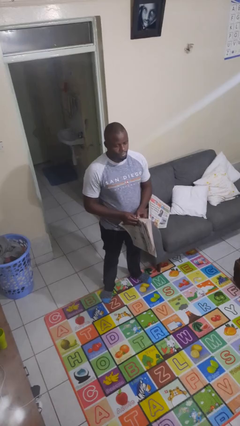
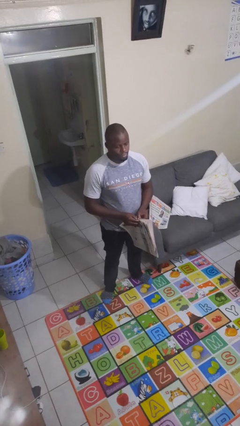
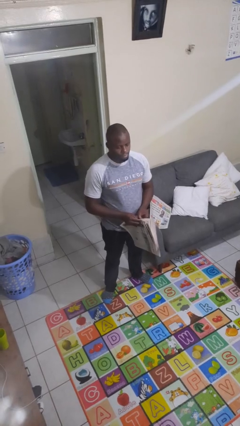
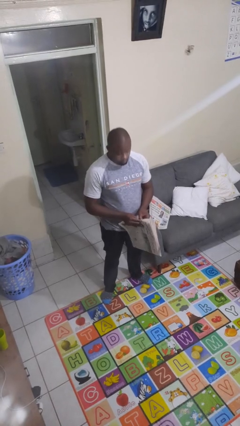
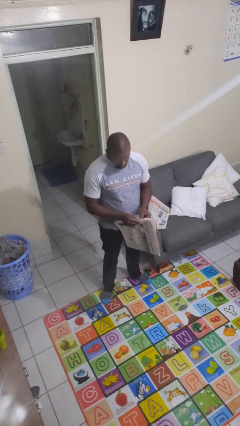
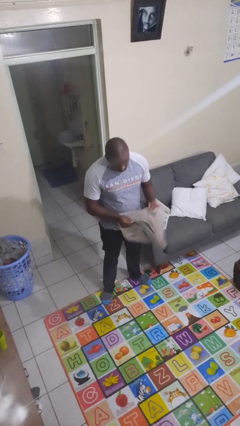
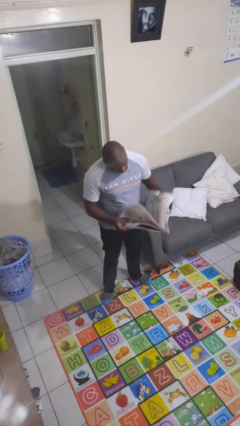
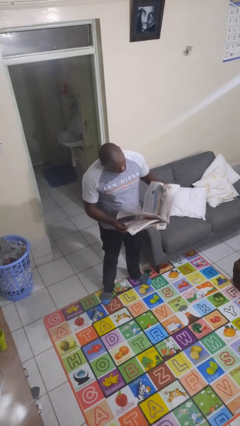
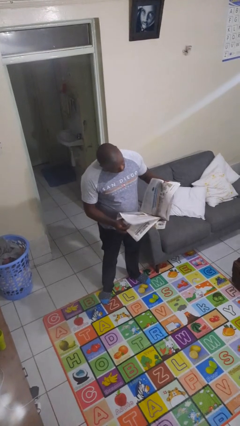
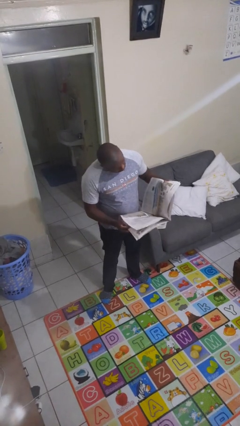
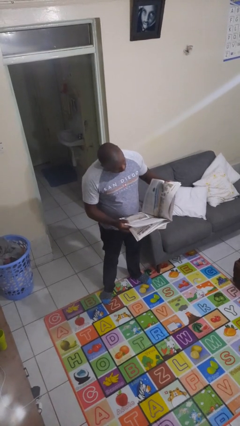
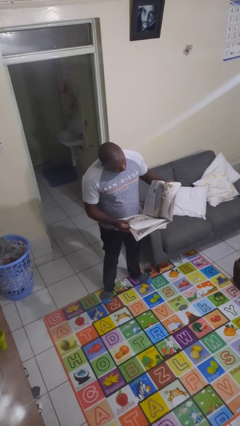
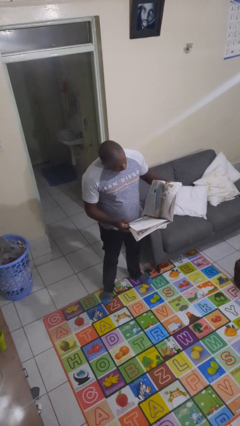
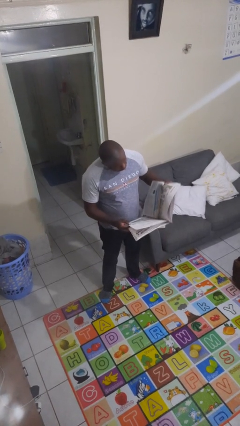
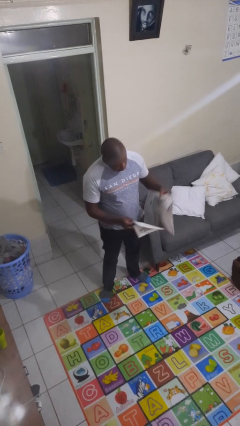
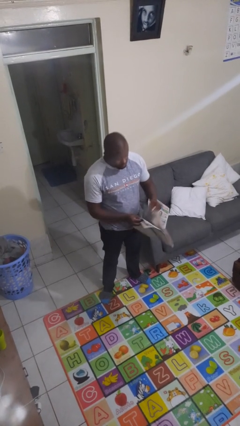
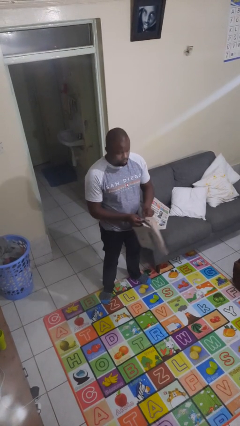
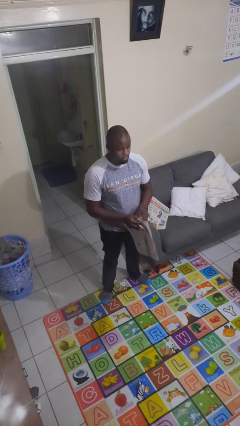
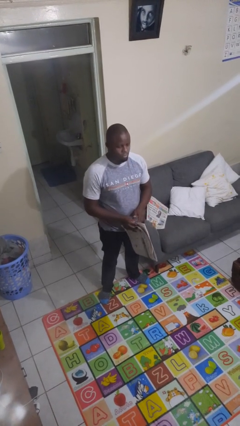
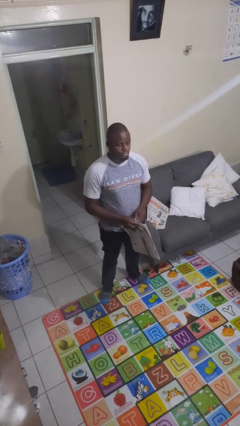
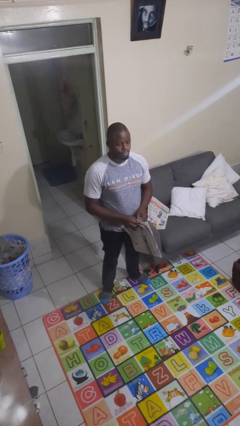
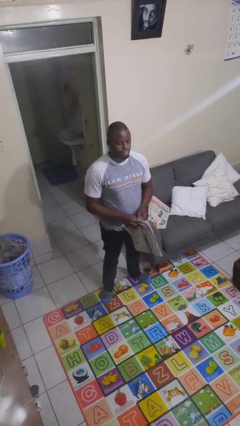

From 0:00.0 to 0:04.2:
person reads newspaper

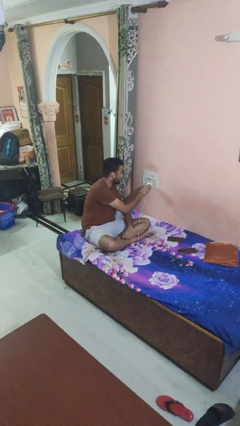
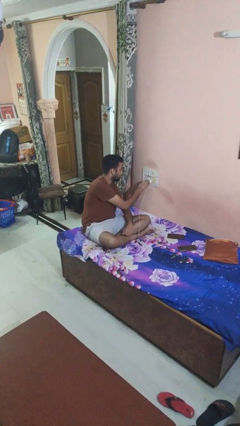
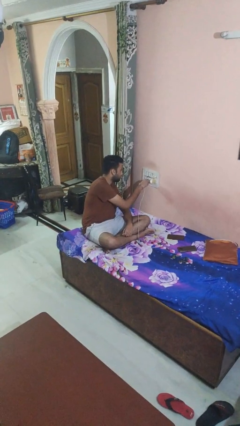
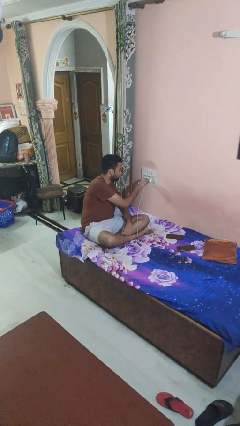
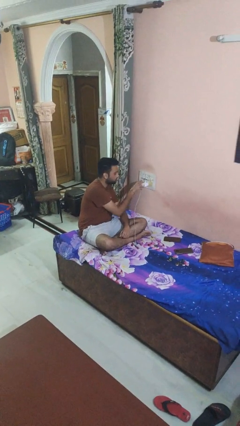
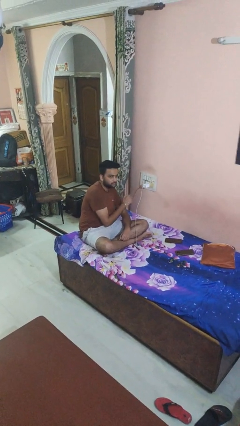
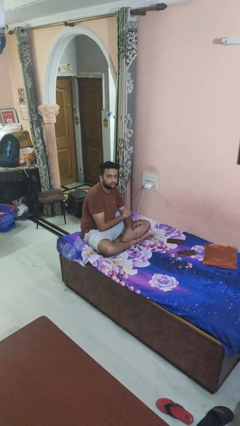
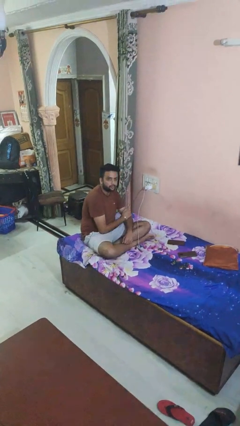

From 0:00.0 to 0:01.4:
person plugs into electrical socket

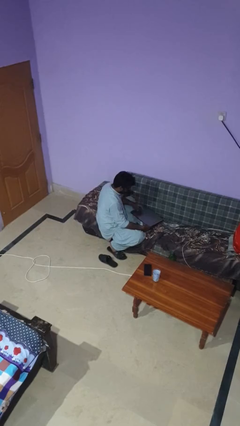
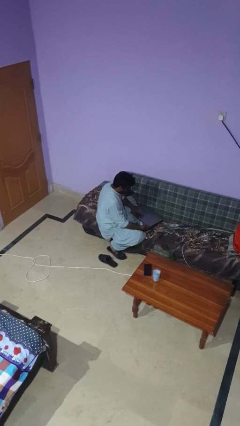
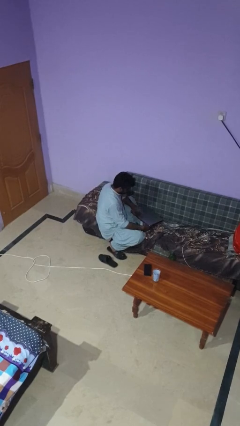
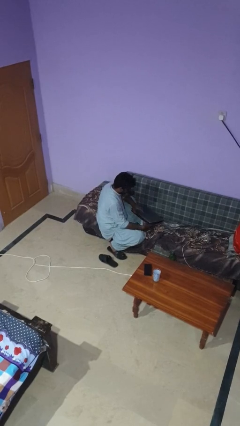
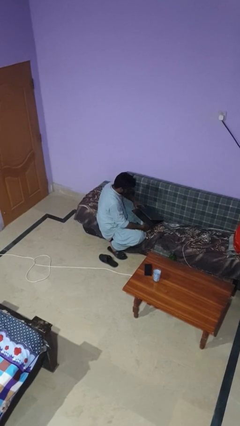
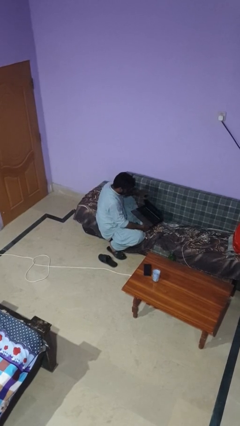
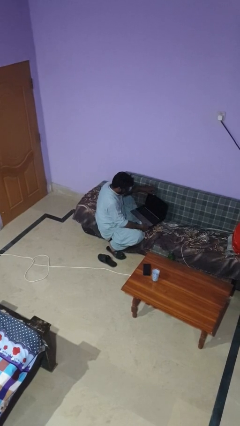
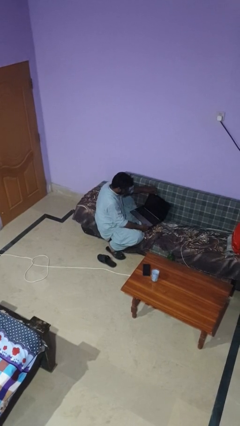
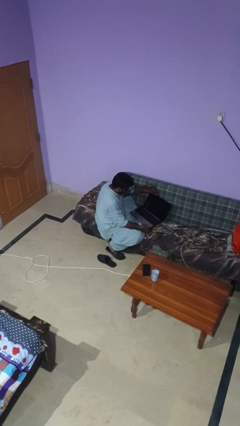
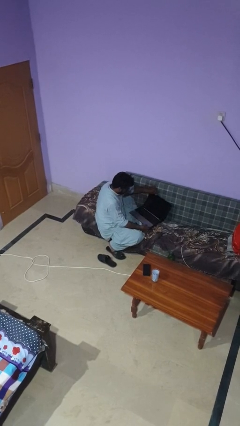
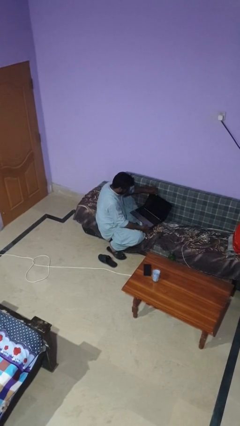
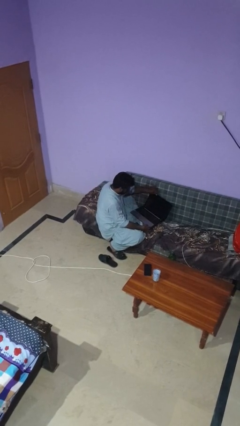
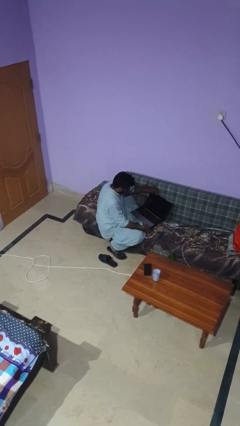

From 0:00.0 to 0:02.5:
person opens laptop

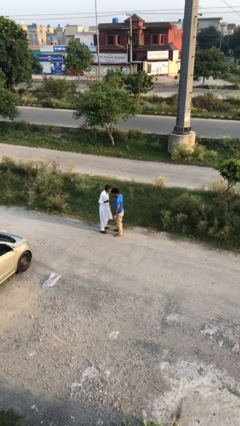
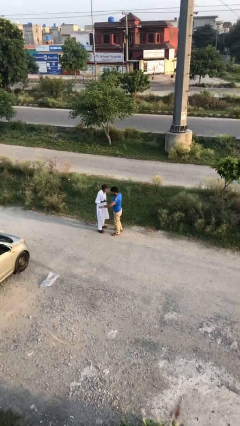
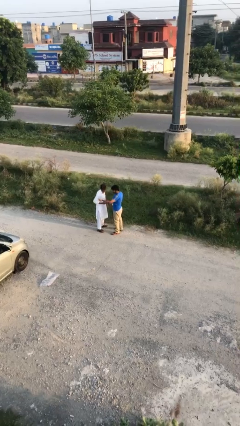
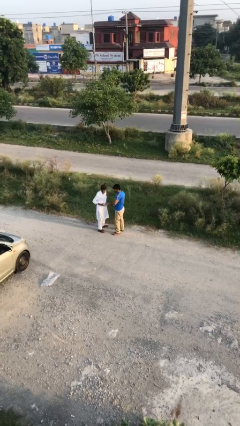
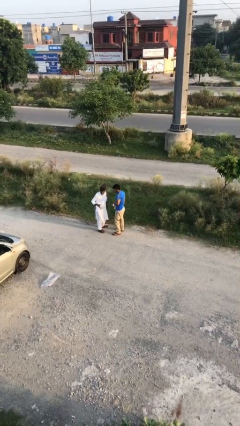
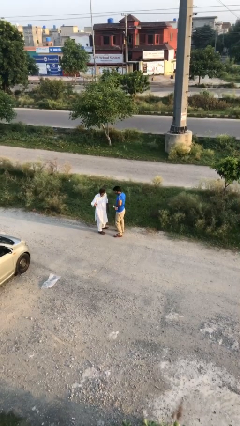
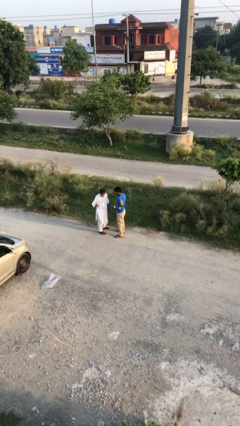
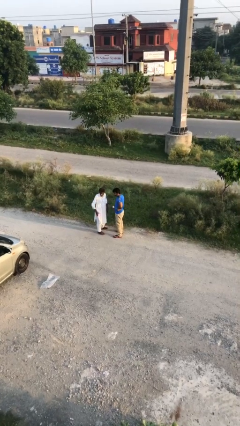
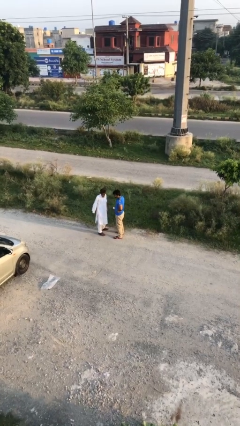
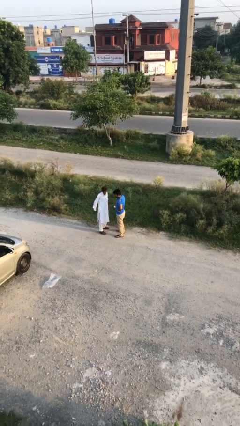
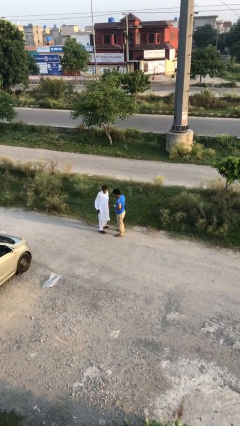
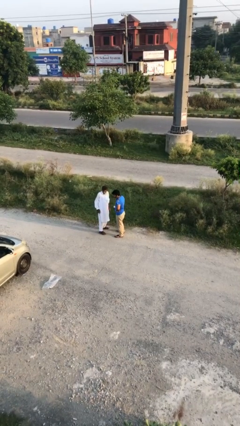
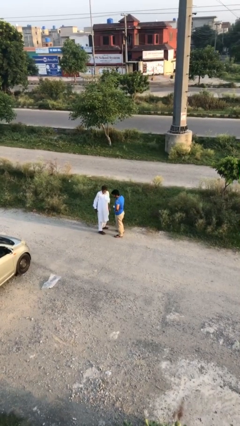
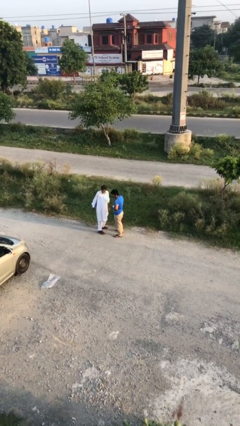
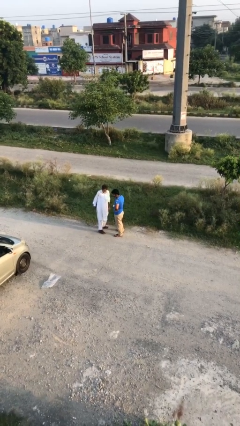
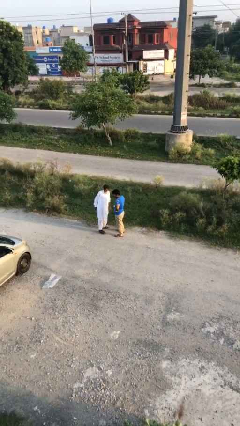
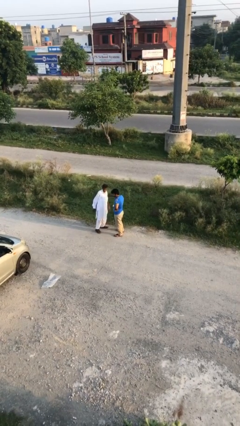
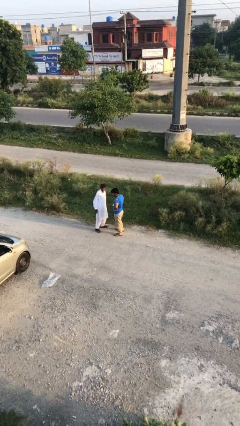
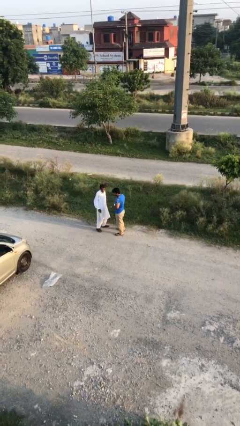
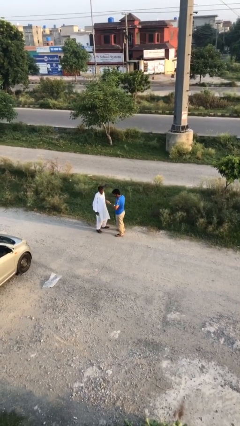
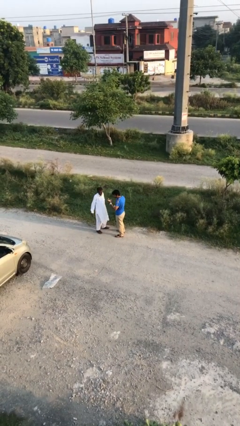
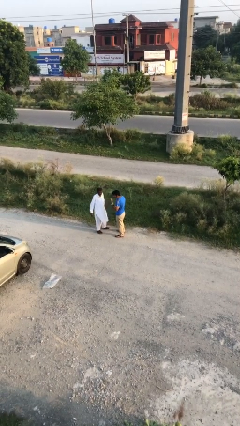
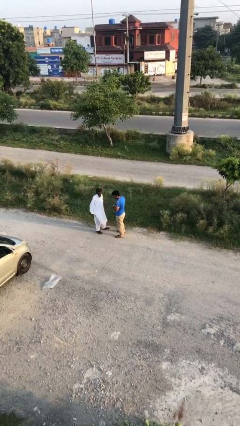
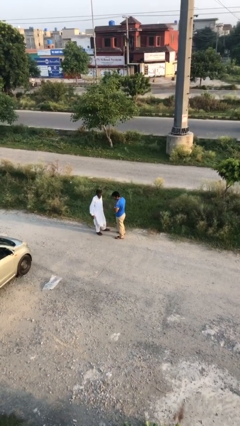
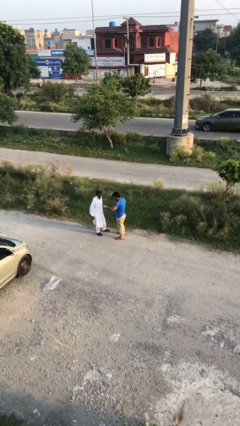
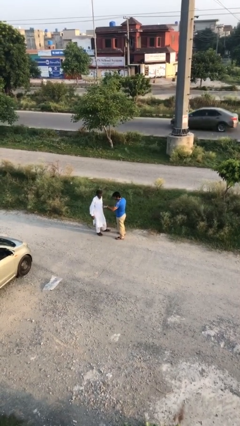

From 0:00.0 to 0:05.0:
person talks to person

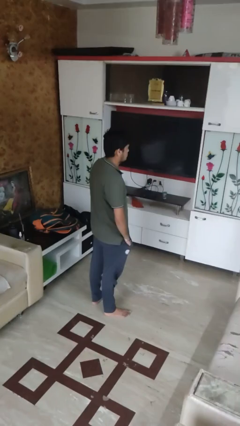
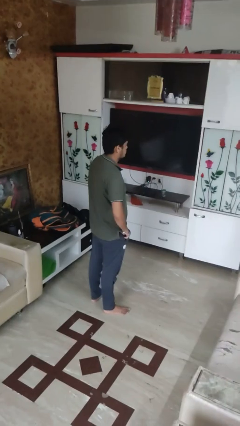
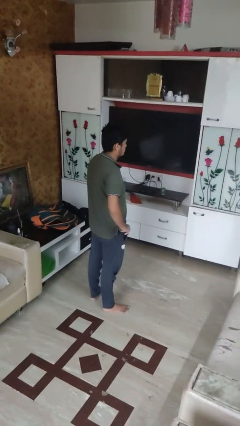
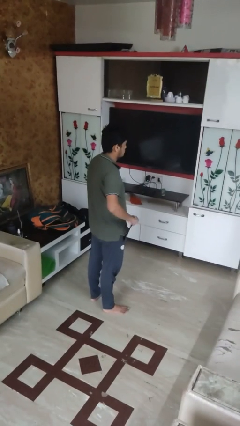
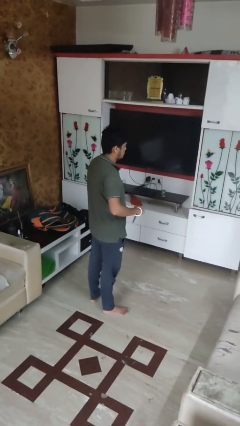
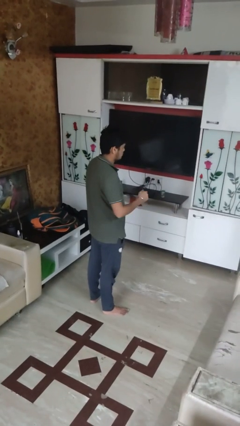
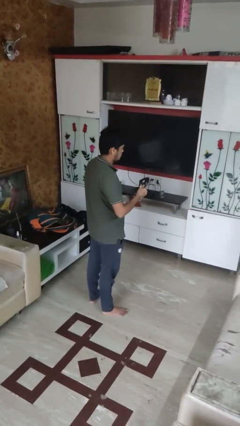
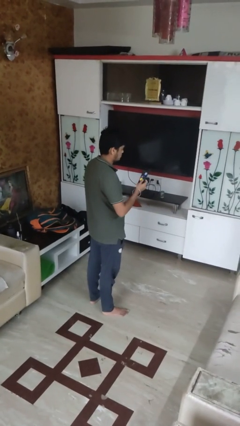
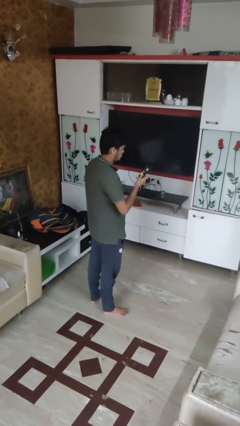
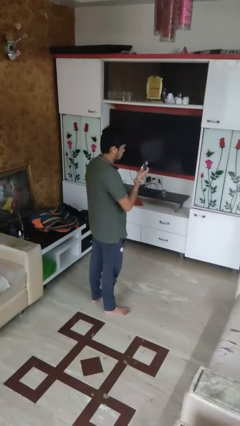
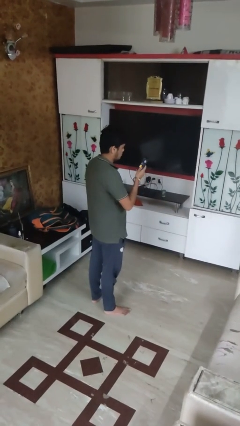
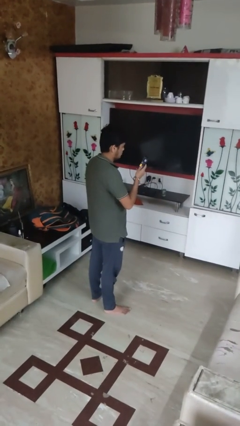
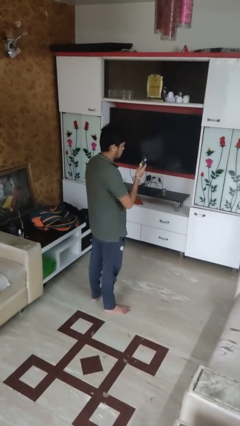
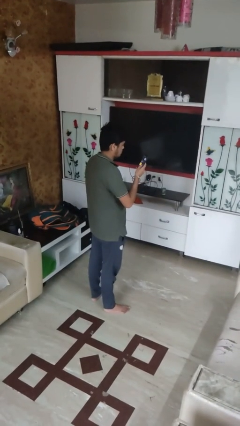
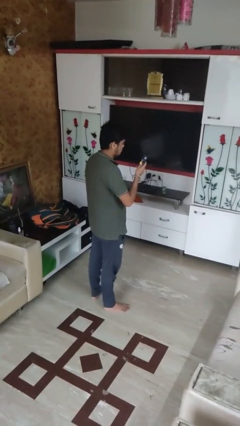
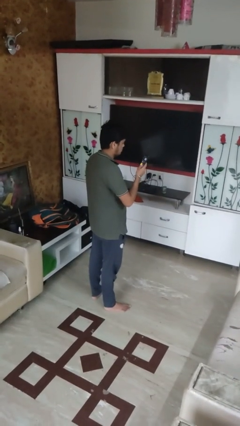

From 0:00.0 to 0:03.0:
person takes phone from pocket

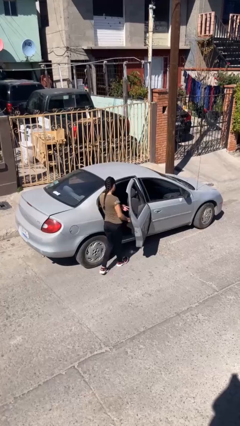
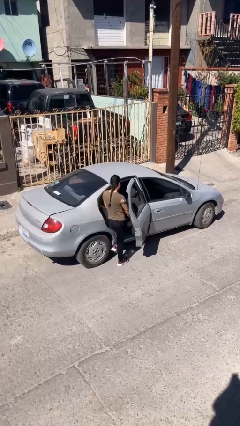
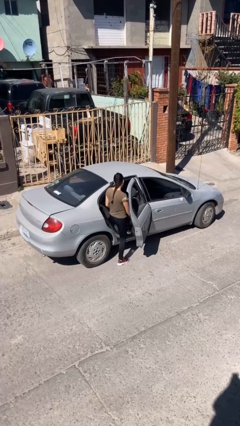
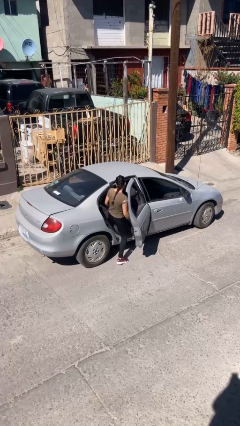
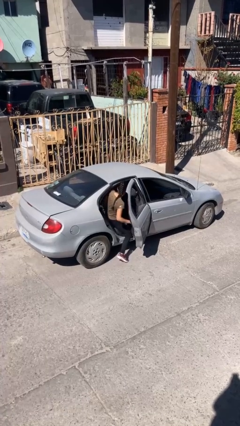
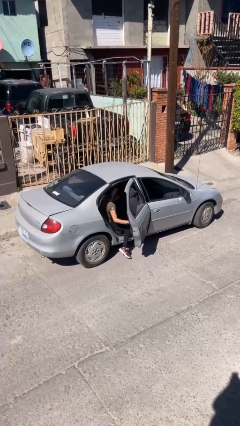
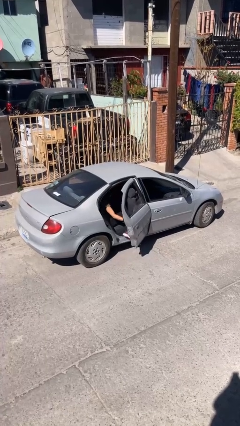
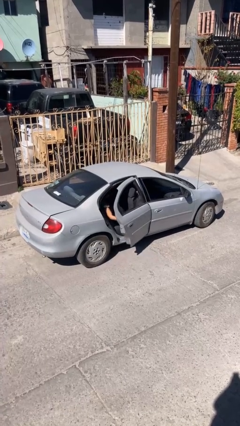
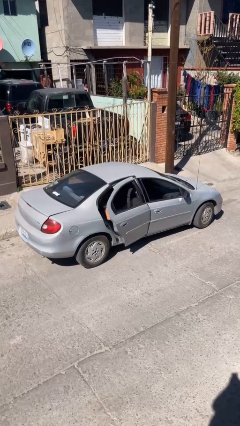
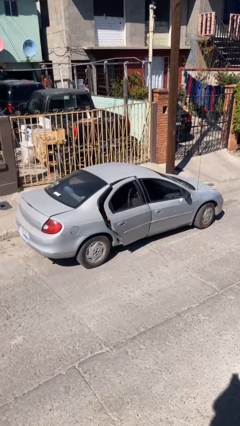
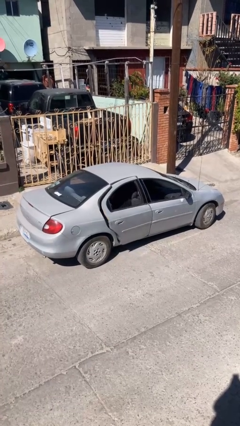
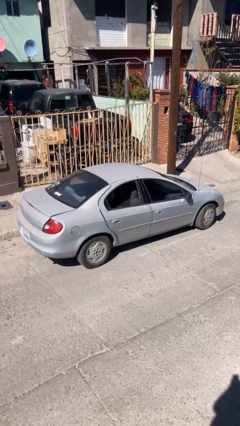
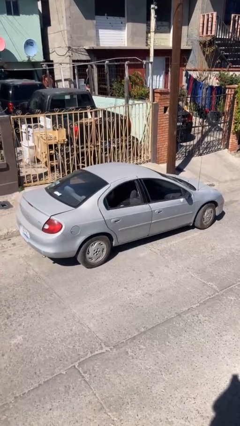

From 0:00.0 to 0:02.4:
car picks up person
